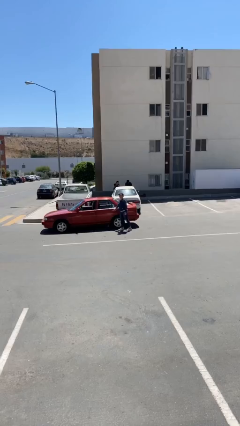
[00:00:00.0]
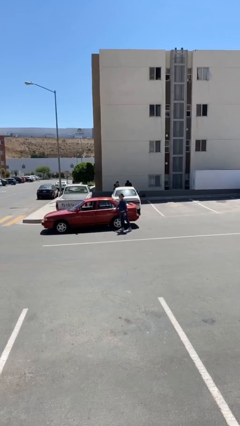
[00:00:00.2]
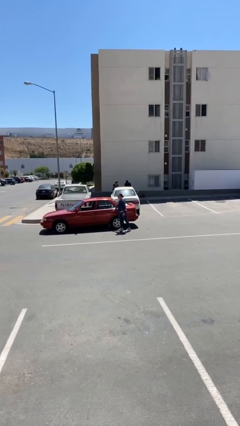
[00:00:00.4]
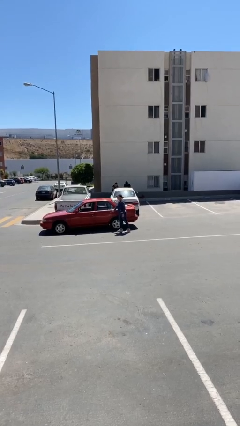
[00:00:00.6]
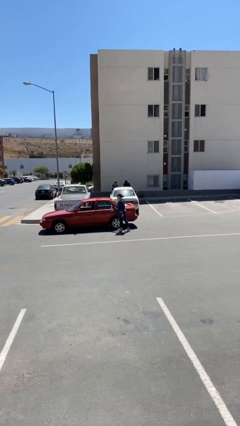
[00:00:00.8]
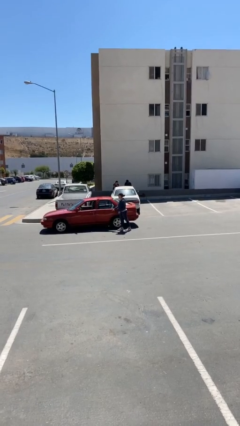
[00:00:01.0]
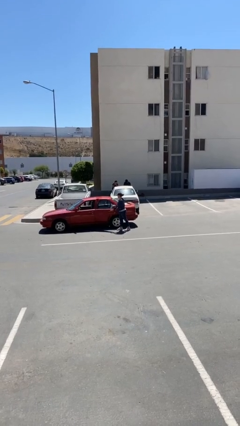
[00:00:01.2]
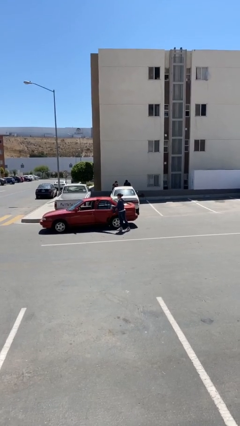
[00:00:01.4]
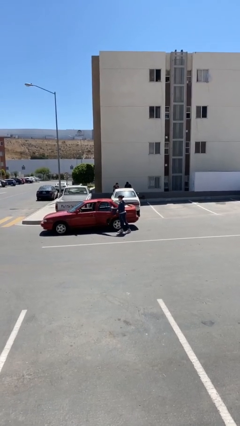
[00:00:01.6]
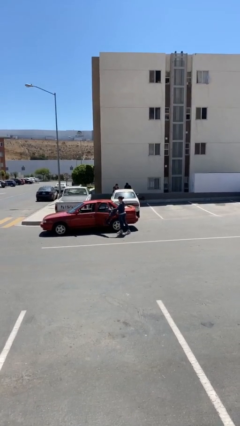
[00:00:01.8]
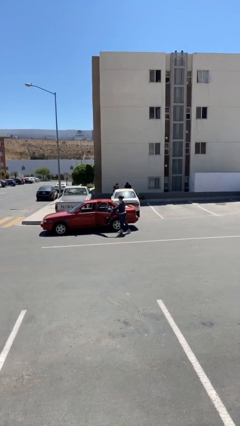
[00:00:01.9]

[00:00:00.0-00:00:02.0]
person opens car door

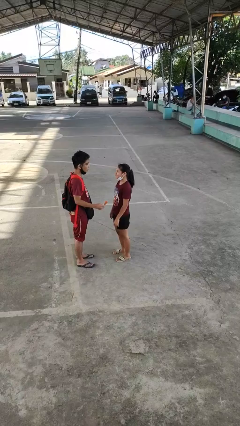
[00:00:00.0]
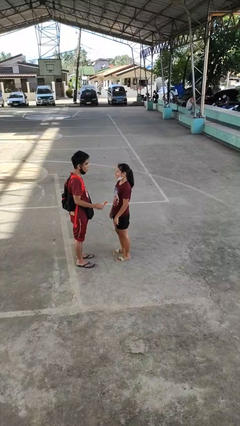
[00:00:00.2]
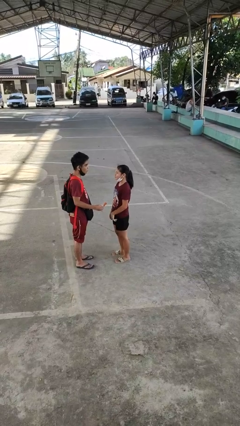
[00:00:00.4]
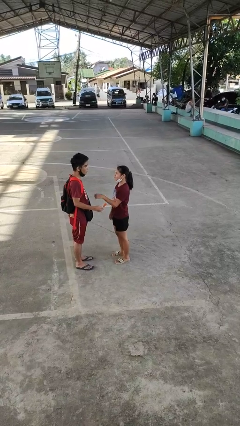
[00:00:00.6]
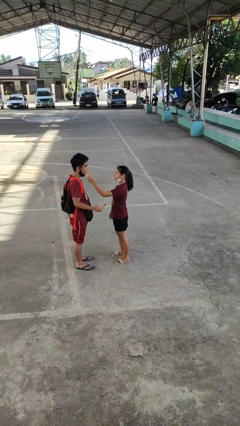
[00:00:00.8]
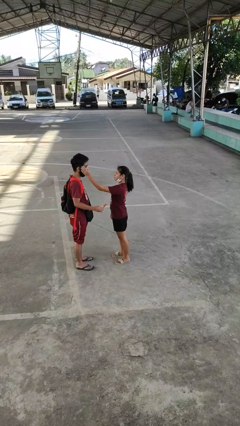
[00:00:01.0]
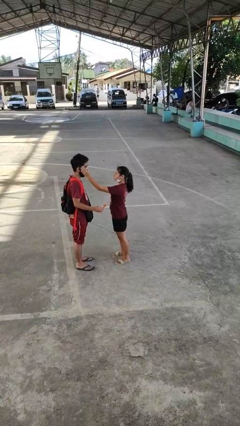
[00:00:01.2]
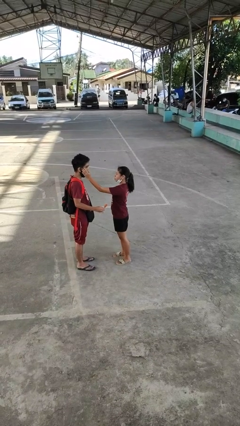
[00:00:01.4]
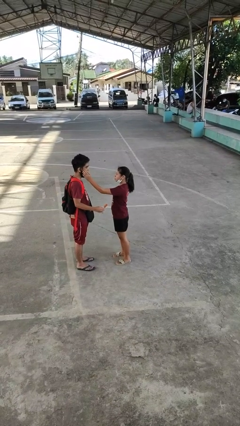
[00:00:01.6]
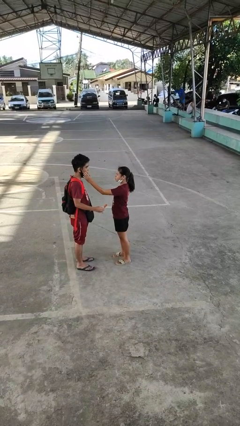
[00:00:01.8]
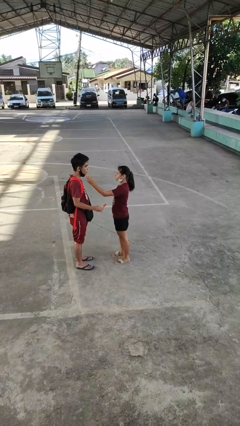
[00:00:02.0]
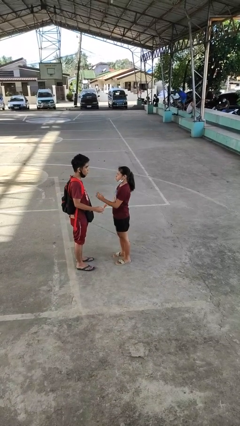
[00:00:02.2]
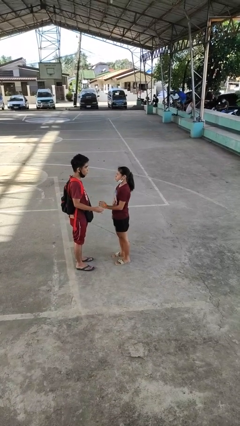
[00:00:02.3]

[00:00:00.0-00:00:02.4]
person touches face of person

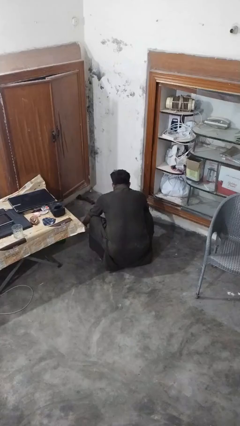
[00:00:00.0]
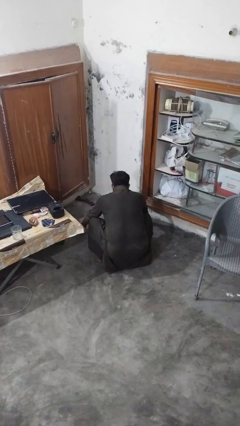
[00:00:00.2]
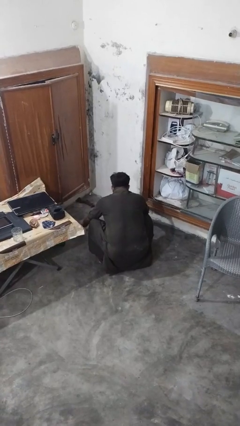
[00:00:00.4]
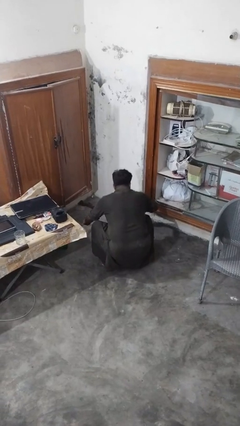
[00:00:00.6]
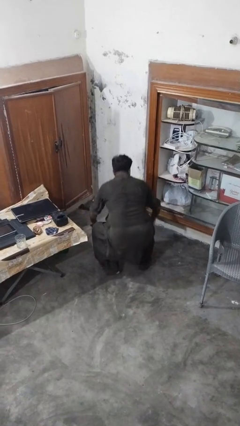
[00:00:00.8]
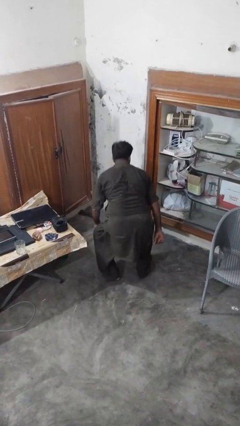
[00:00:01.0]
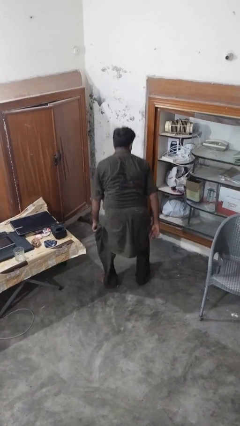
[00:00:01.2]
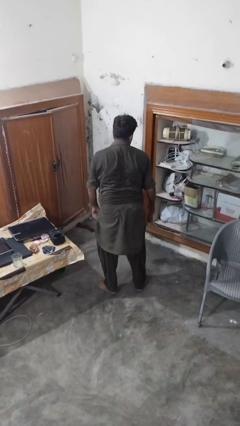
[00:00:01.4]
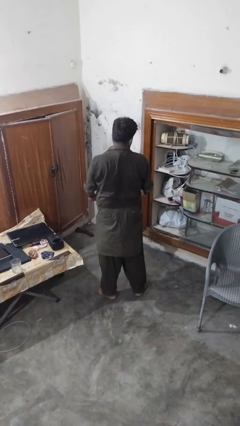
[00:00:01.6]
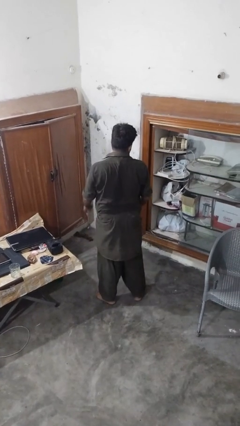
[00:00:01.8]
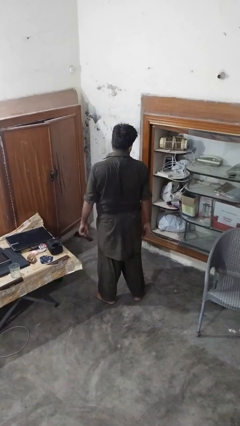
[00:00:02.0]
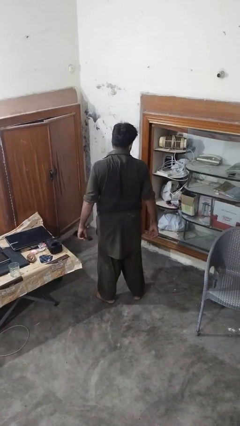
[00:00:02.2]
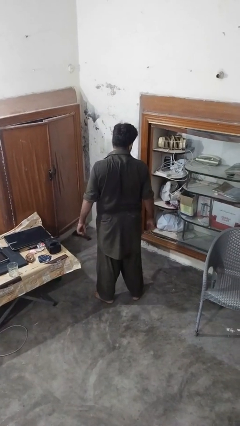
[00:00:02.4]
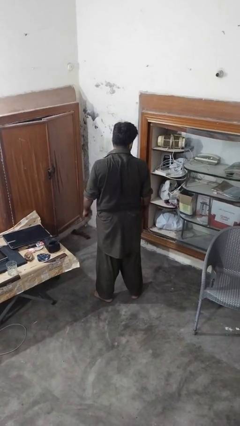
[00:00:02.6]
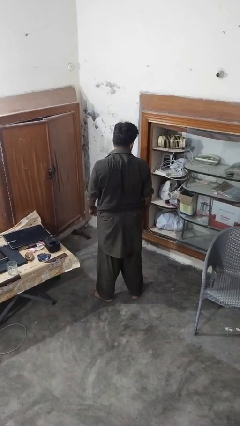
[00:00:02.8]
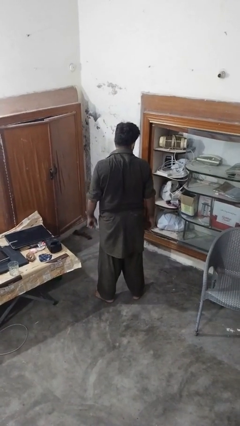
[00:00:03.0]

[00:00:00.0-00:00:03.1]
person stands up

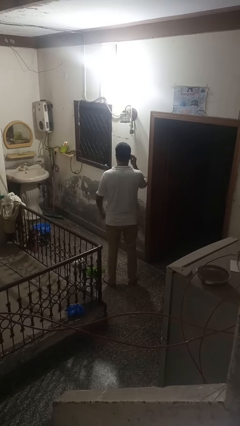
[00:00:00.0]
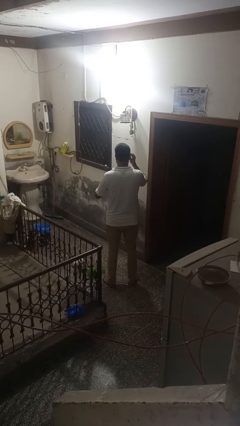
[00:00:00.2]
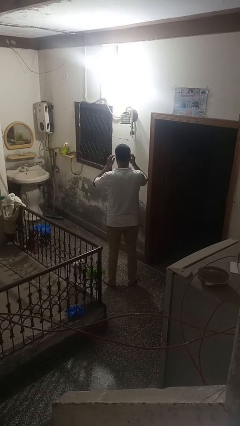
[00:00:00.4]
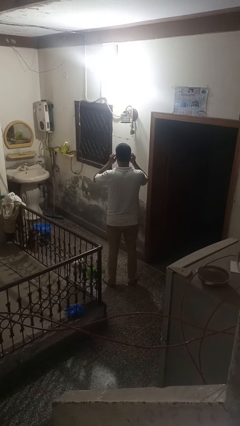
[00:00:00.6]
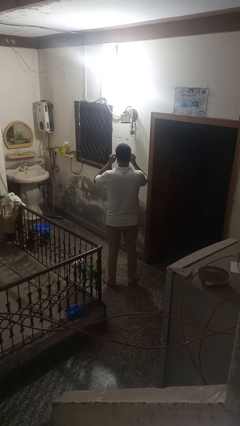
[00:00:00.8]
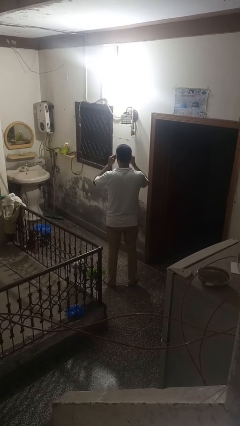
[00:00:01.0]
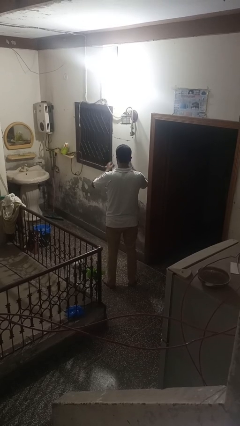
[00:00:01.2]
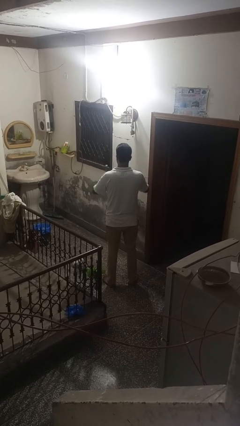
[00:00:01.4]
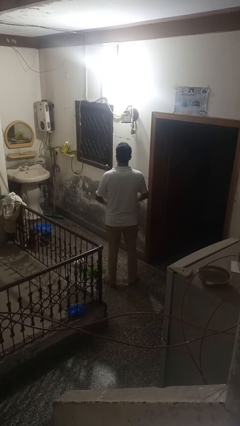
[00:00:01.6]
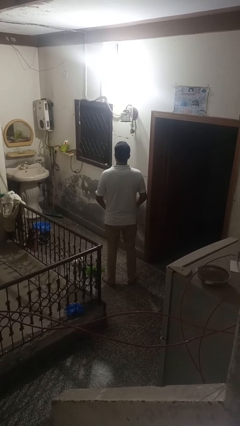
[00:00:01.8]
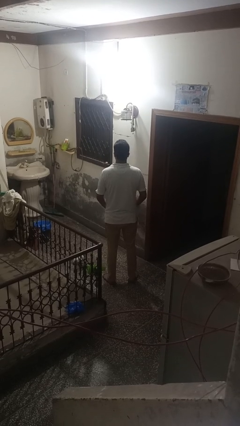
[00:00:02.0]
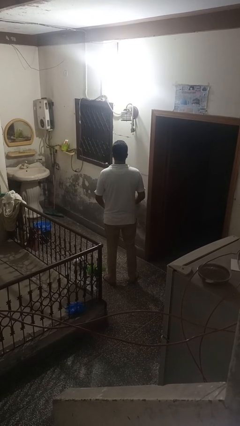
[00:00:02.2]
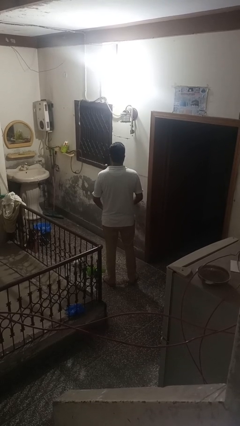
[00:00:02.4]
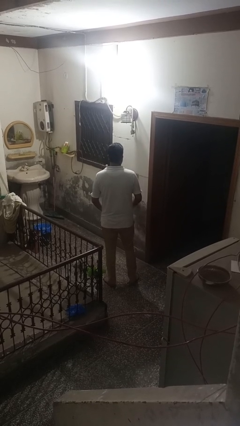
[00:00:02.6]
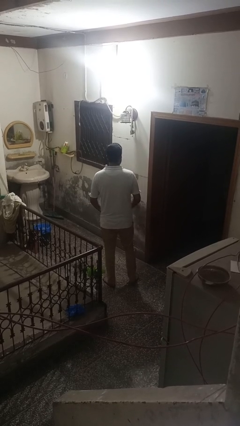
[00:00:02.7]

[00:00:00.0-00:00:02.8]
person takes off sunglasses

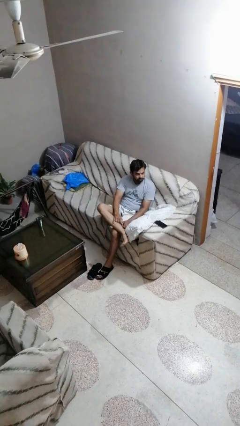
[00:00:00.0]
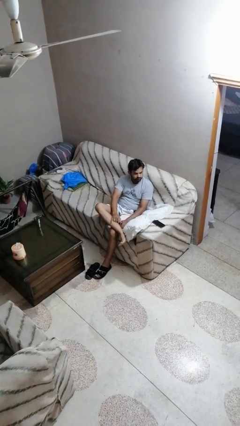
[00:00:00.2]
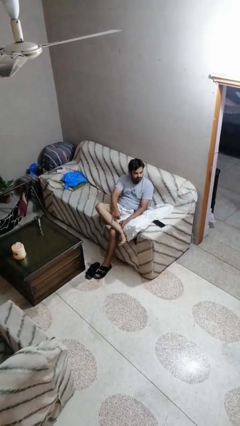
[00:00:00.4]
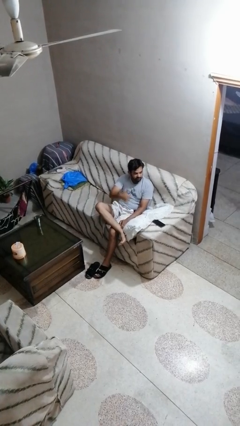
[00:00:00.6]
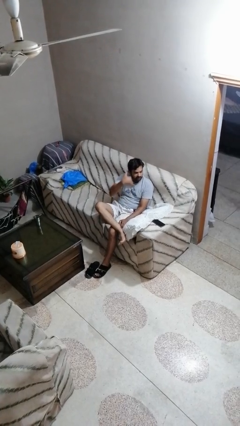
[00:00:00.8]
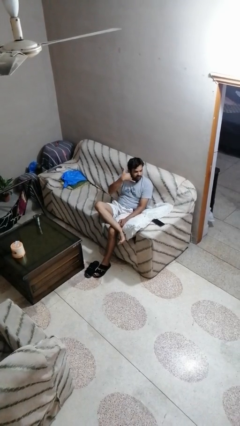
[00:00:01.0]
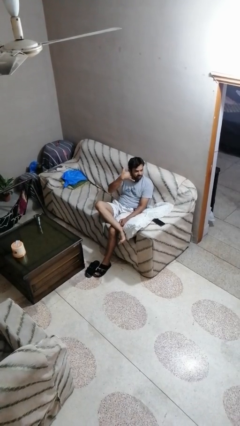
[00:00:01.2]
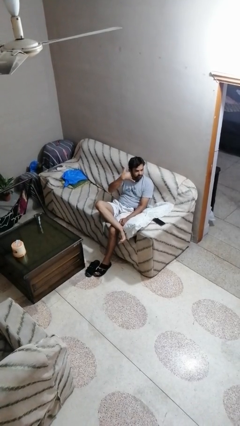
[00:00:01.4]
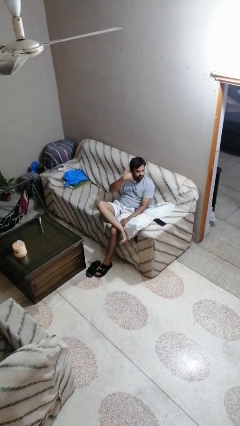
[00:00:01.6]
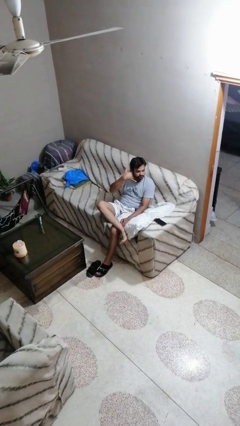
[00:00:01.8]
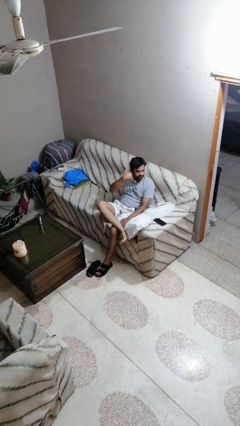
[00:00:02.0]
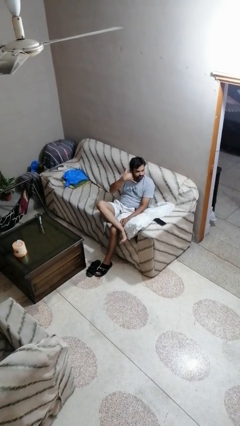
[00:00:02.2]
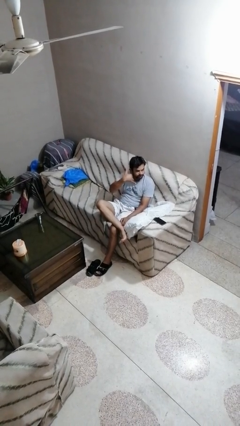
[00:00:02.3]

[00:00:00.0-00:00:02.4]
person gestures call me

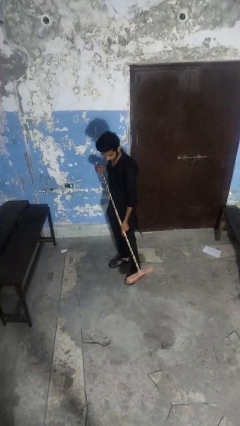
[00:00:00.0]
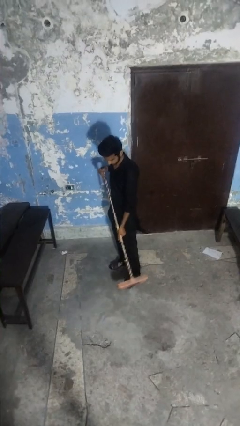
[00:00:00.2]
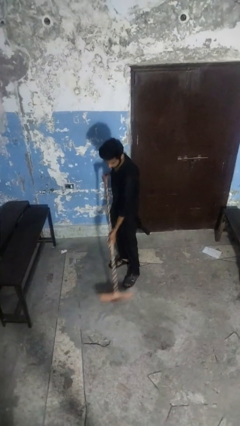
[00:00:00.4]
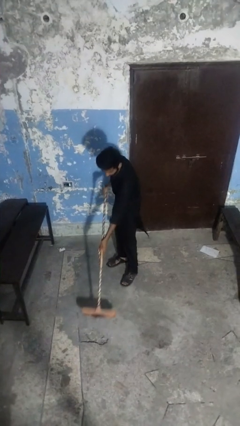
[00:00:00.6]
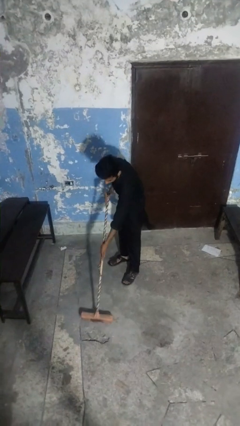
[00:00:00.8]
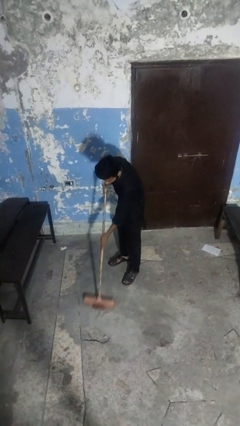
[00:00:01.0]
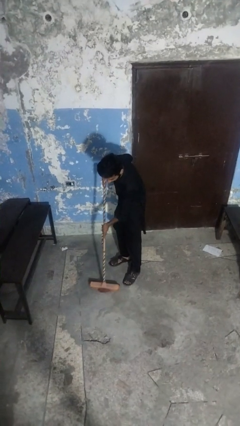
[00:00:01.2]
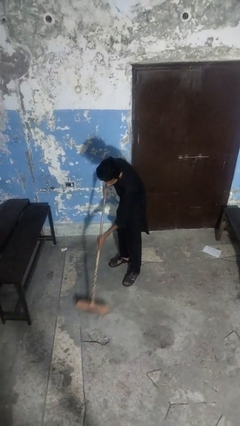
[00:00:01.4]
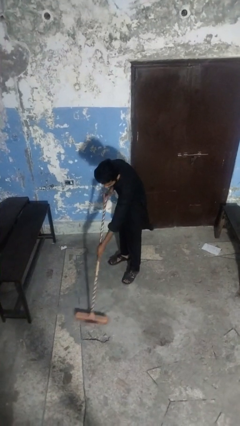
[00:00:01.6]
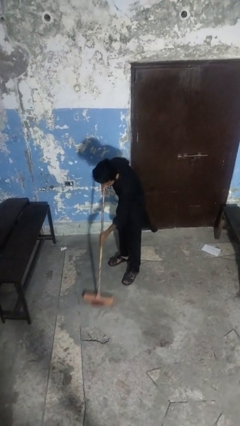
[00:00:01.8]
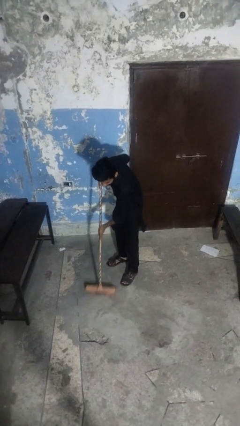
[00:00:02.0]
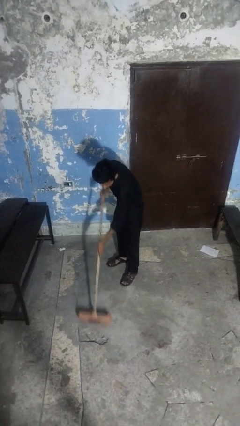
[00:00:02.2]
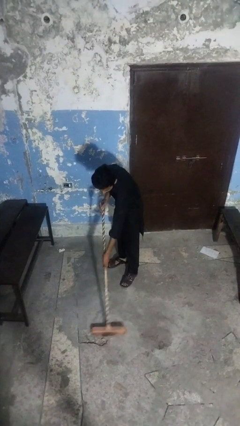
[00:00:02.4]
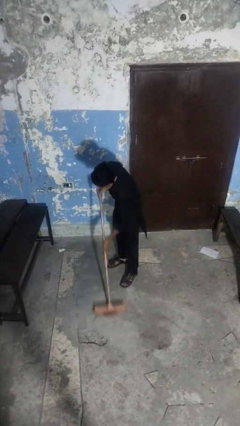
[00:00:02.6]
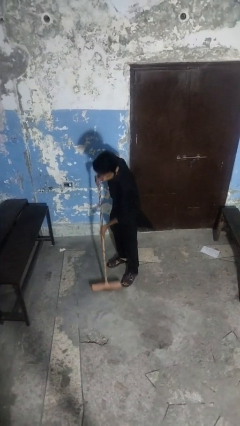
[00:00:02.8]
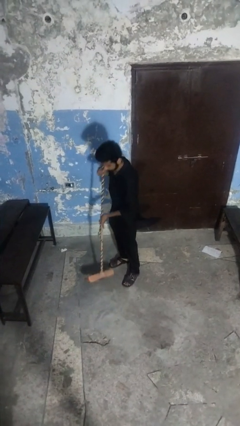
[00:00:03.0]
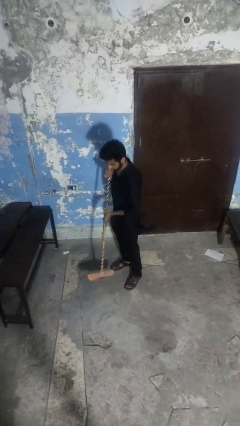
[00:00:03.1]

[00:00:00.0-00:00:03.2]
person sweeps floor

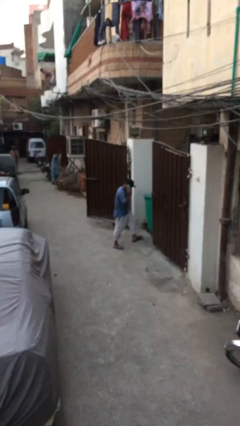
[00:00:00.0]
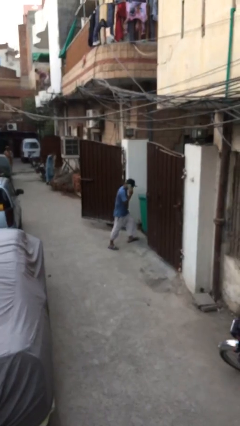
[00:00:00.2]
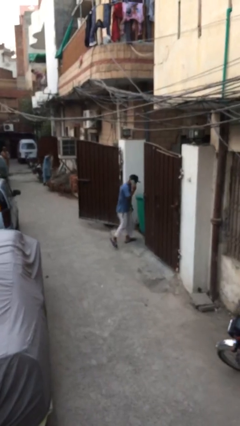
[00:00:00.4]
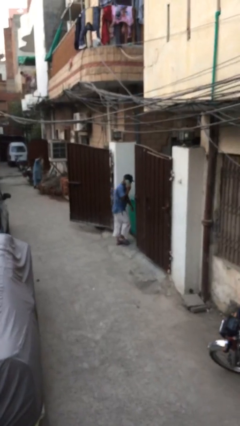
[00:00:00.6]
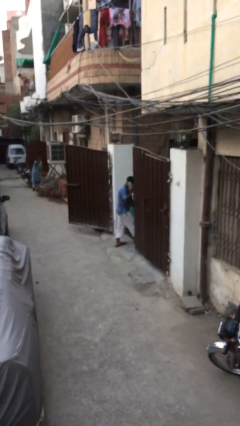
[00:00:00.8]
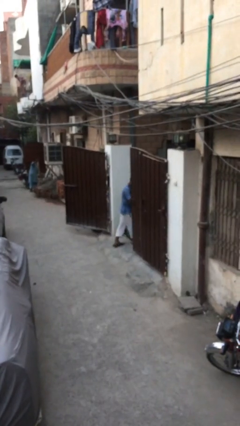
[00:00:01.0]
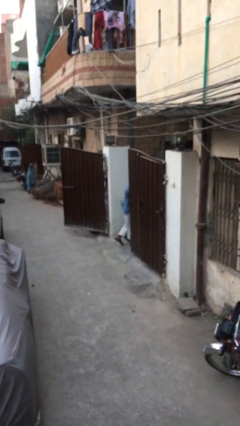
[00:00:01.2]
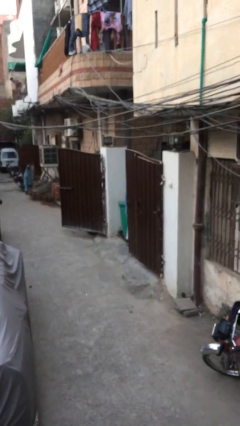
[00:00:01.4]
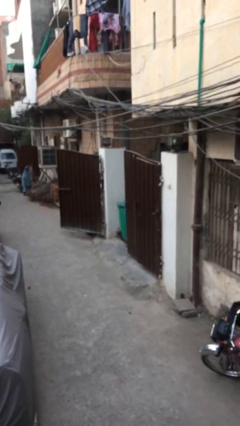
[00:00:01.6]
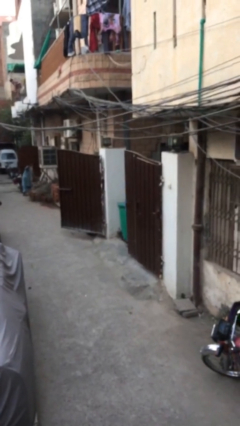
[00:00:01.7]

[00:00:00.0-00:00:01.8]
person exits scene through structure
